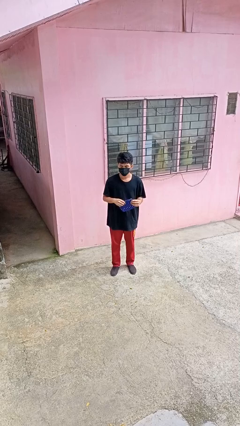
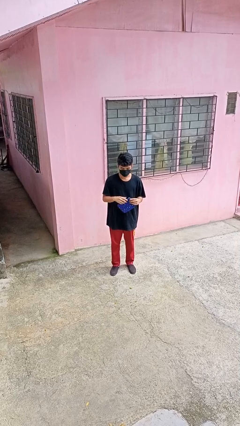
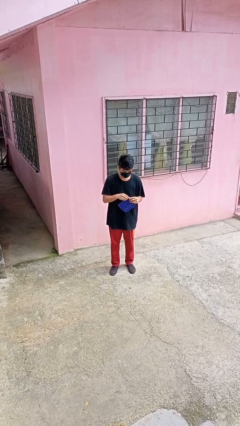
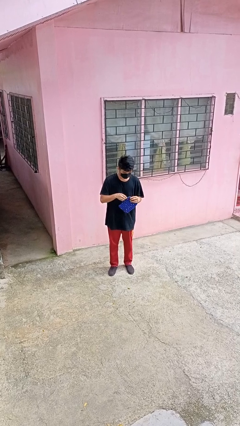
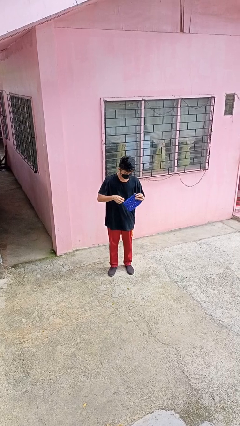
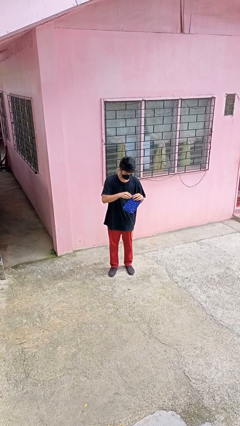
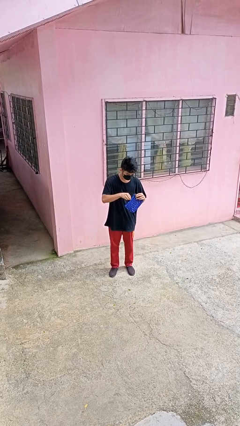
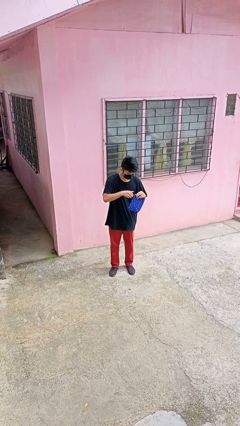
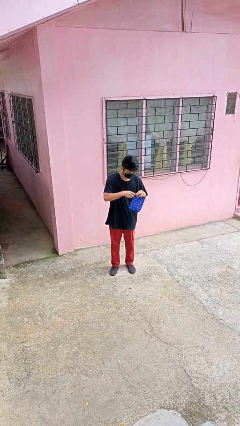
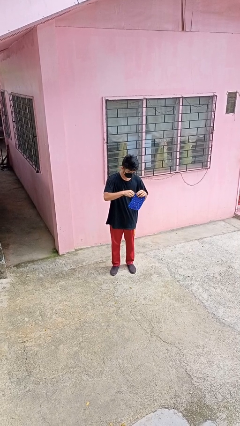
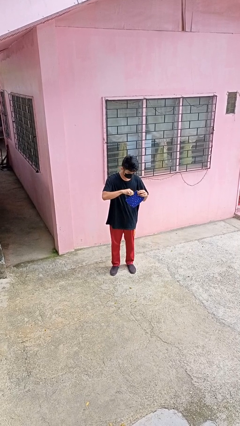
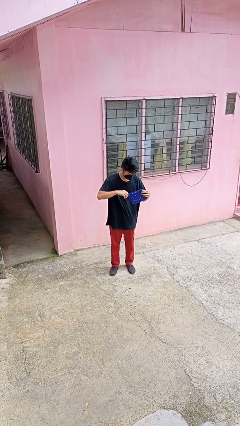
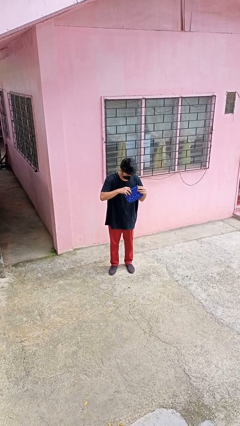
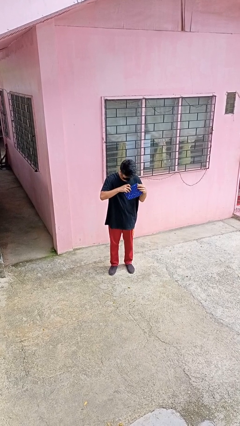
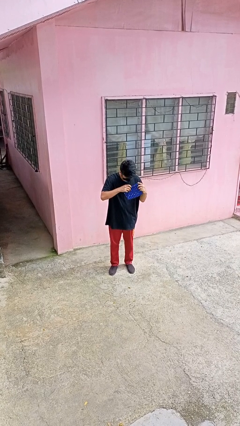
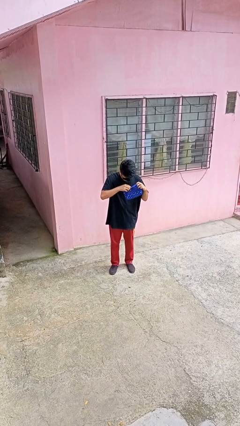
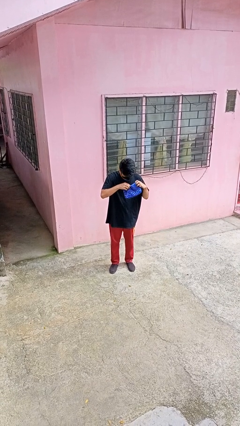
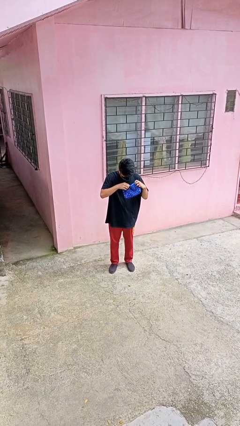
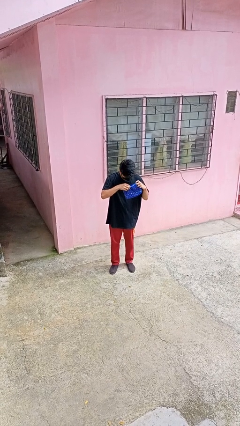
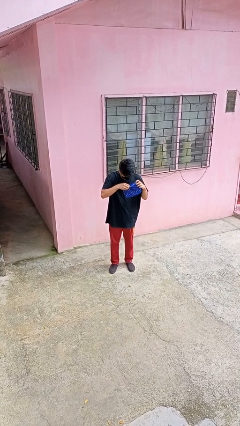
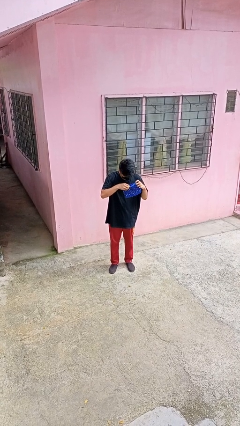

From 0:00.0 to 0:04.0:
person searches in purse

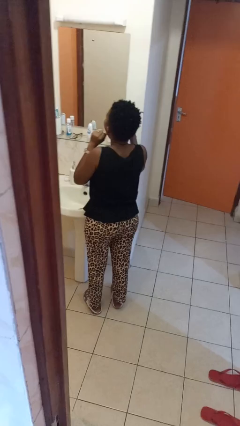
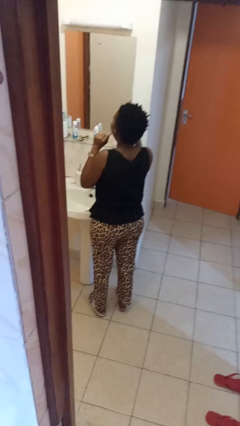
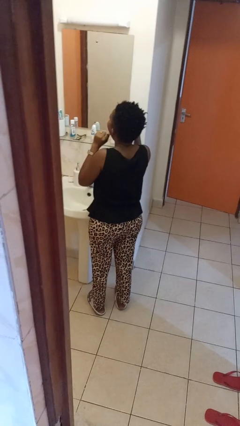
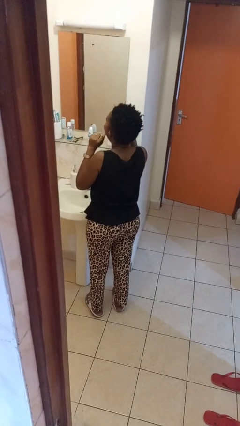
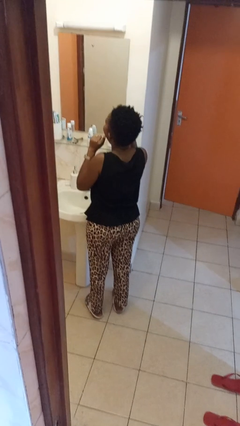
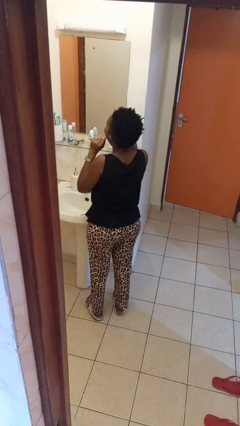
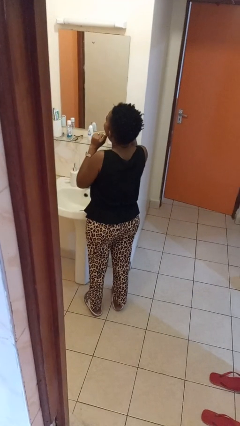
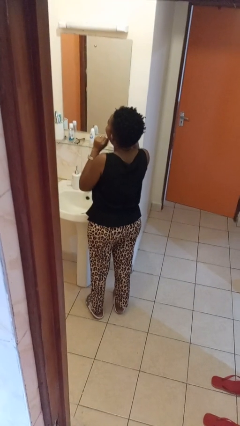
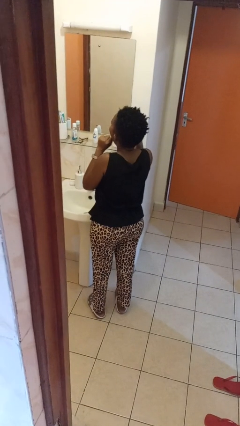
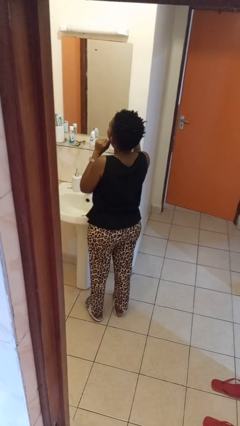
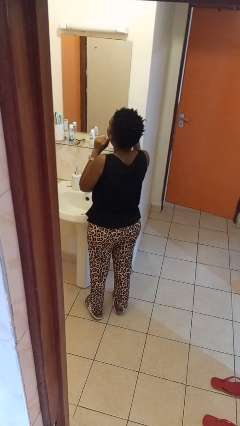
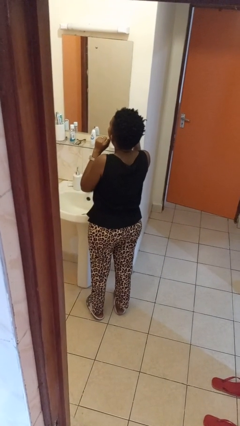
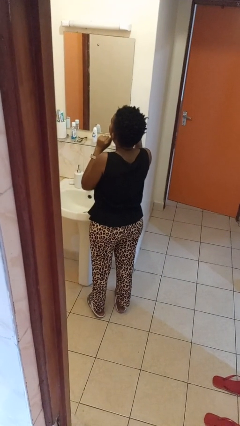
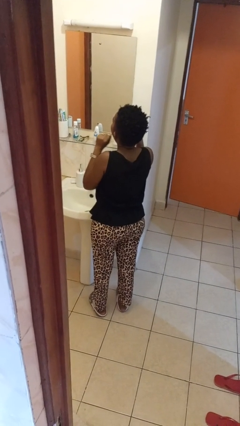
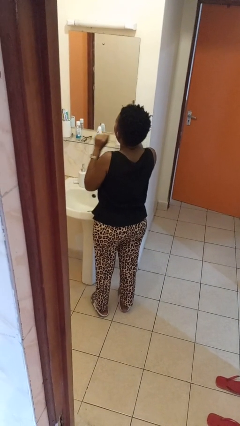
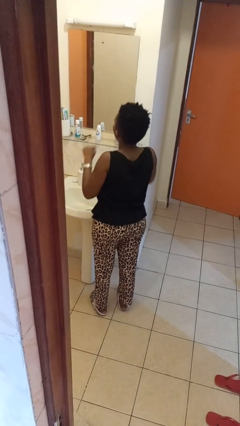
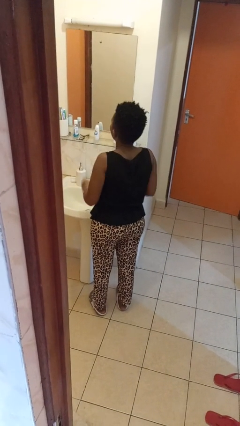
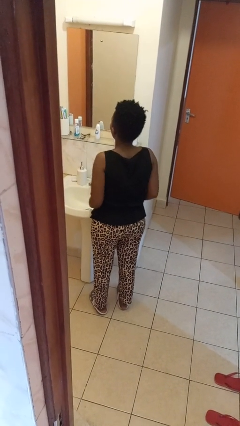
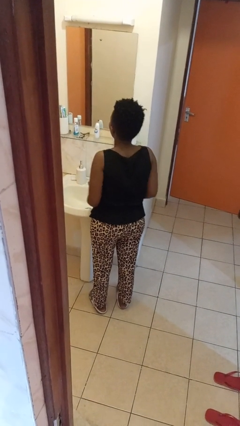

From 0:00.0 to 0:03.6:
person flosses

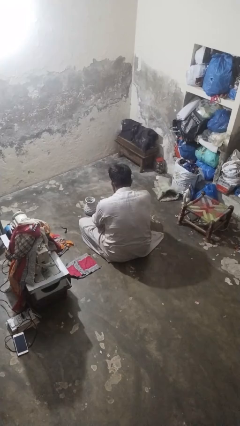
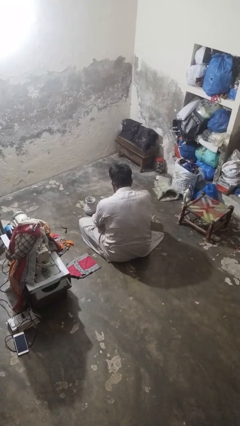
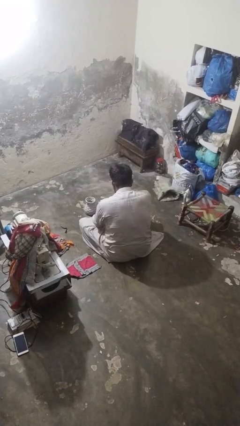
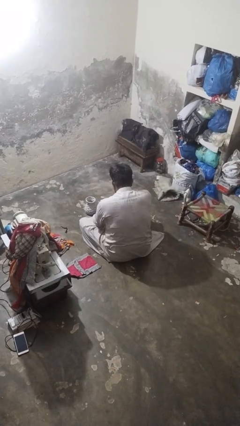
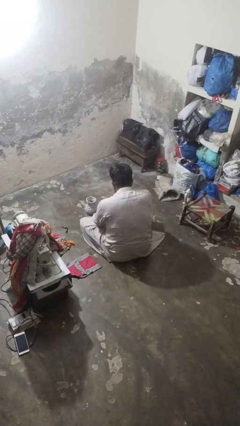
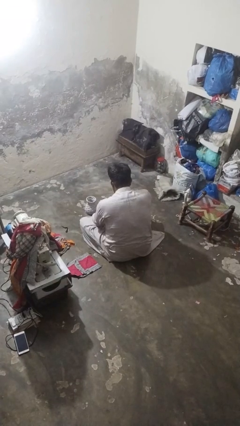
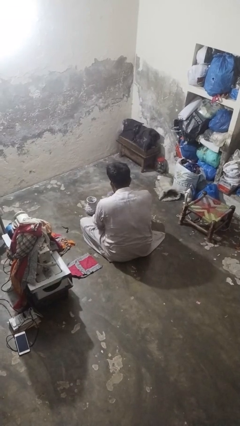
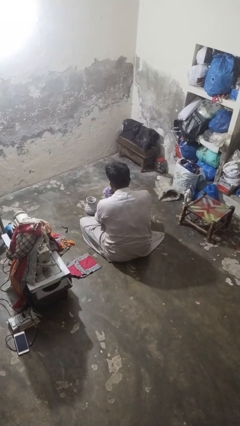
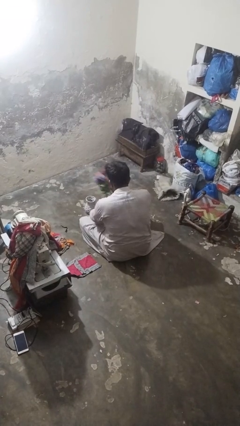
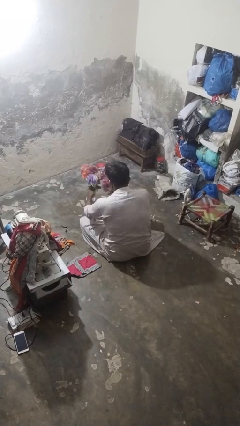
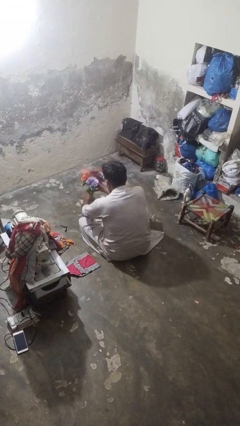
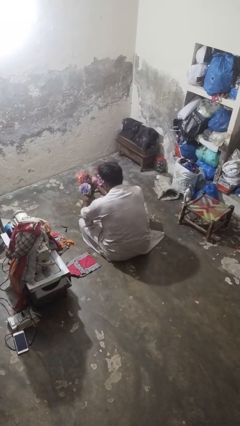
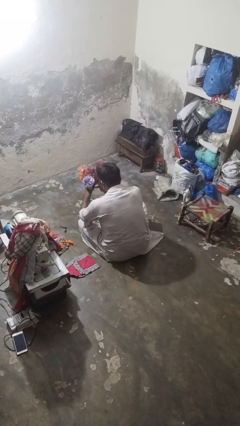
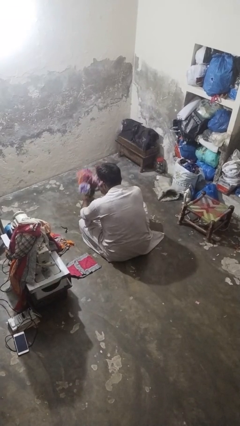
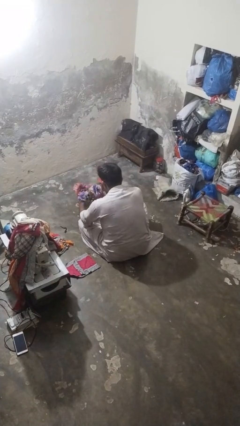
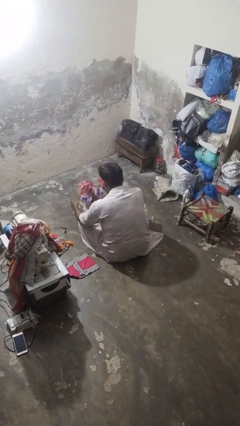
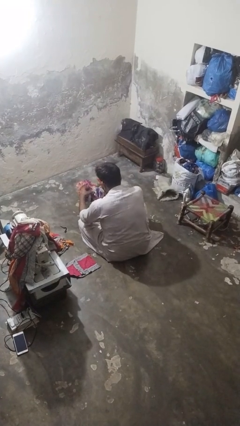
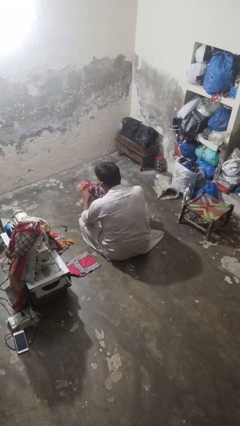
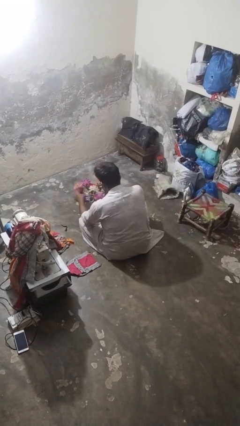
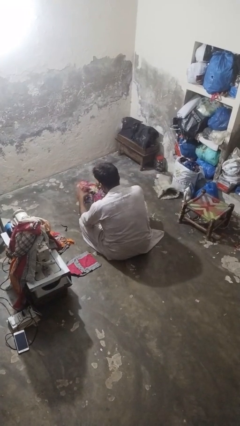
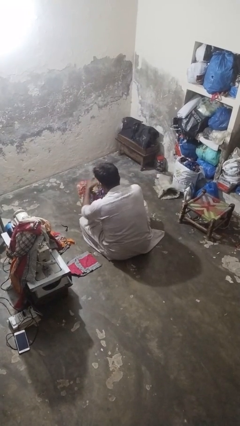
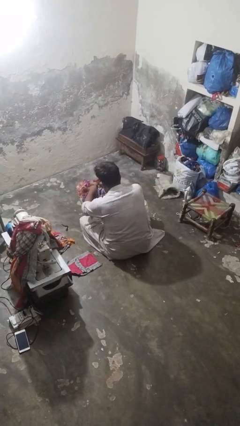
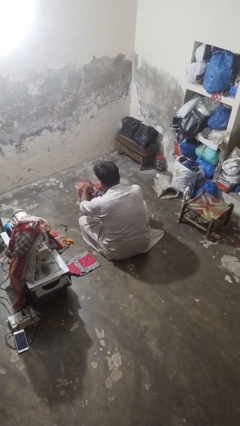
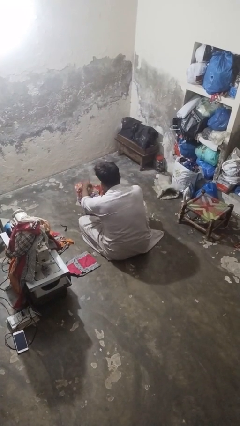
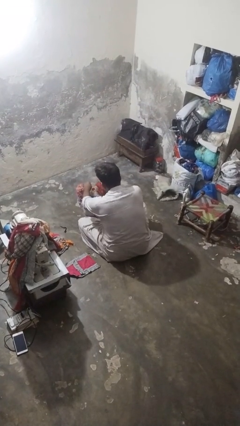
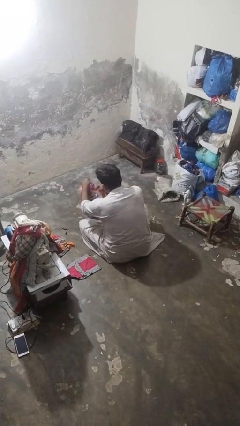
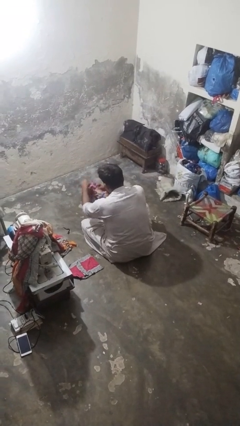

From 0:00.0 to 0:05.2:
person arranges flowers in vase

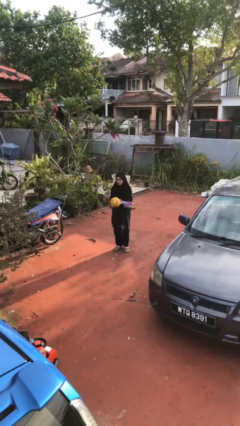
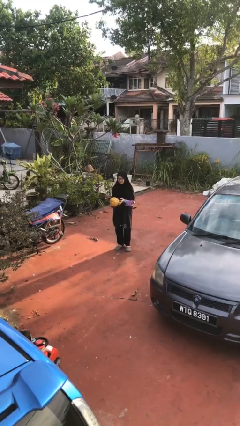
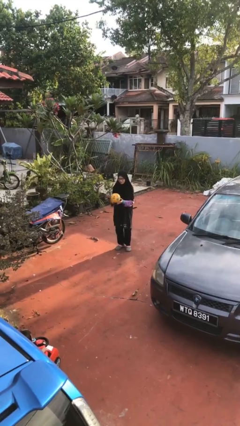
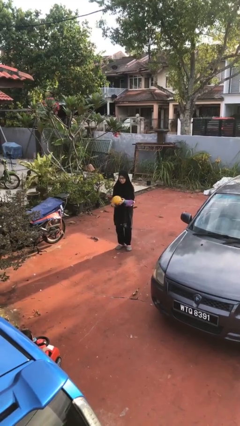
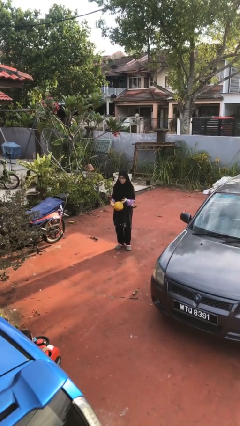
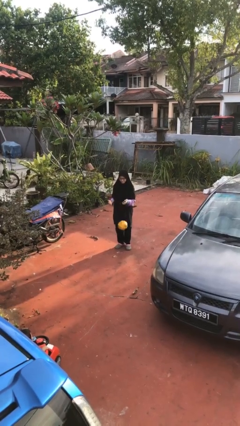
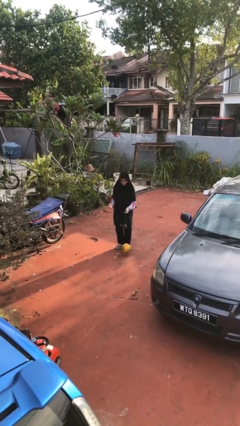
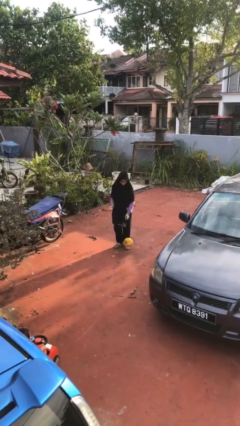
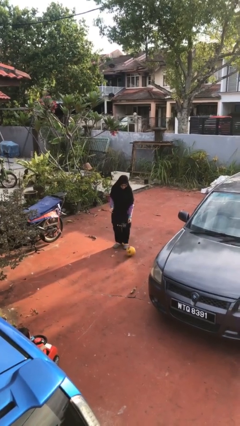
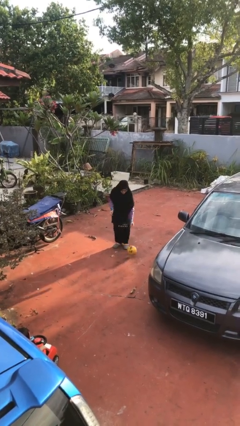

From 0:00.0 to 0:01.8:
person drops object

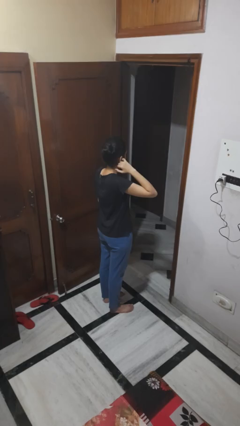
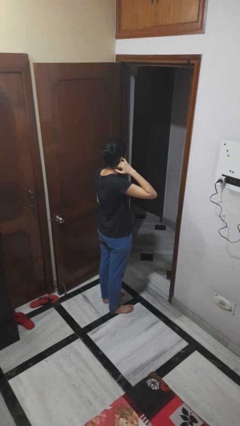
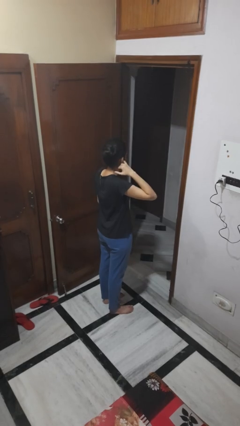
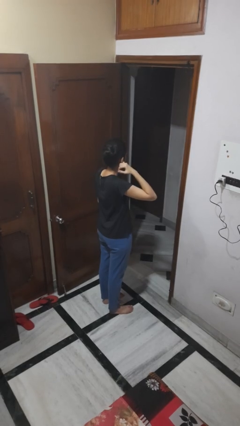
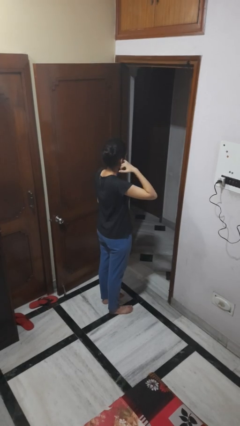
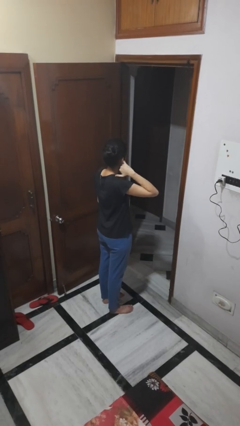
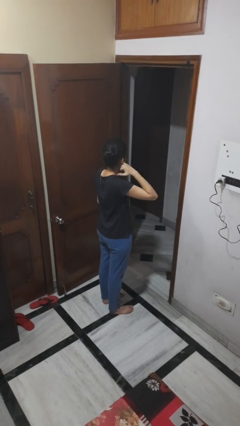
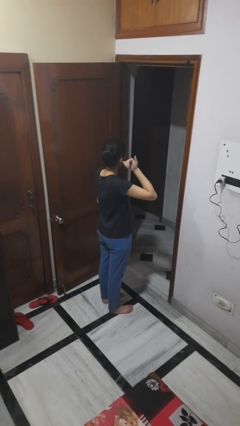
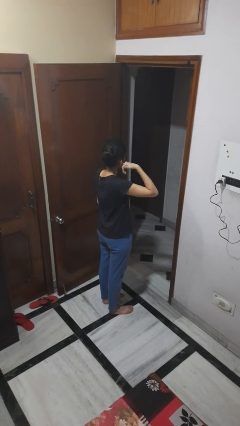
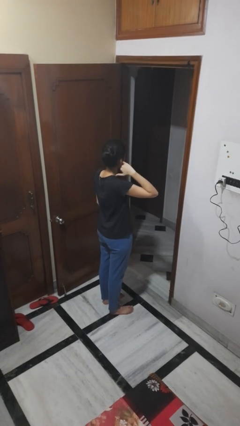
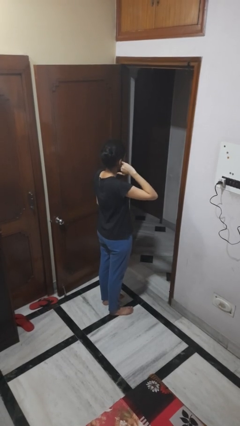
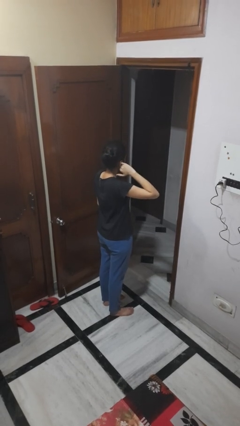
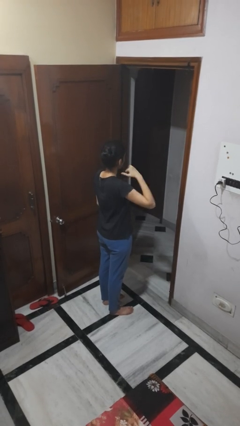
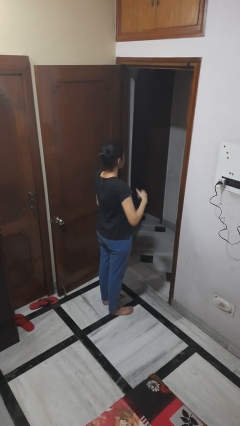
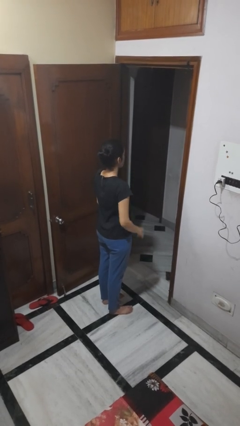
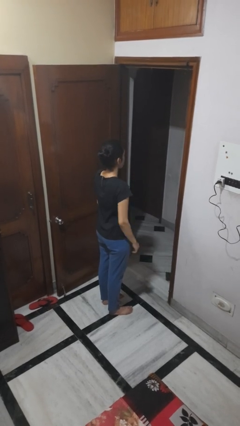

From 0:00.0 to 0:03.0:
person puts fingers in ear
